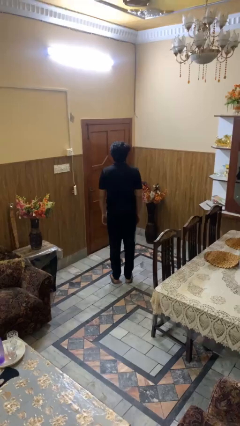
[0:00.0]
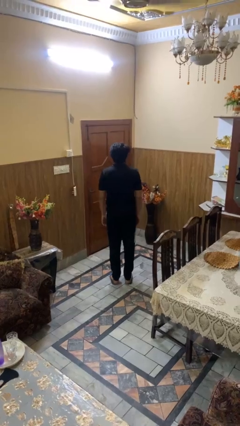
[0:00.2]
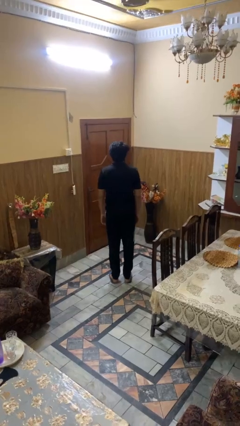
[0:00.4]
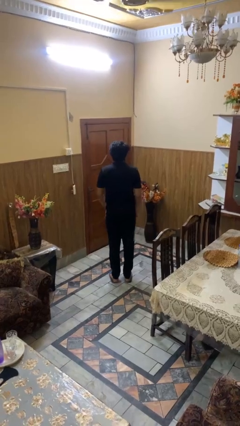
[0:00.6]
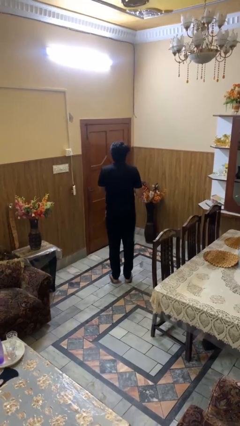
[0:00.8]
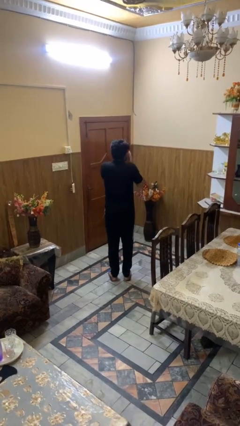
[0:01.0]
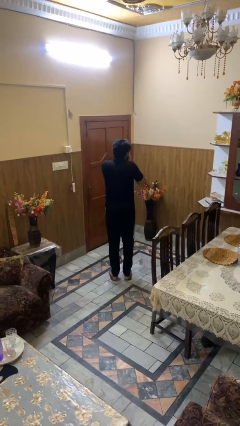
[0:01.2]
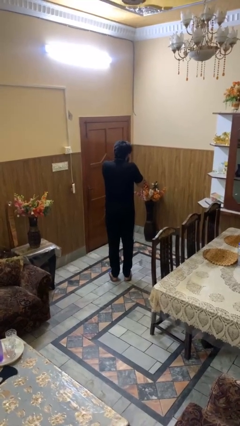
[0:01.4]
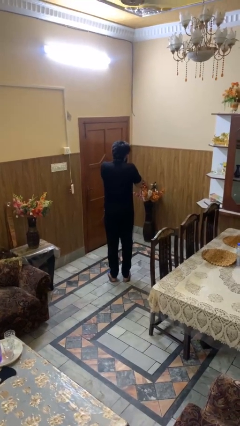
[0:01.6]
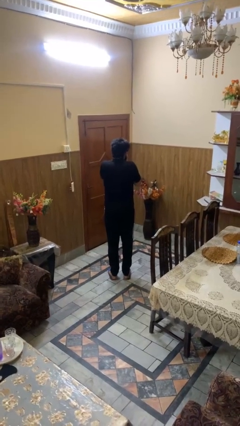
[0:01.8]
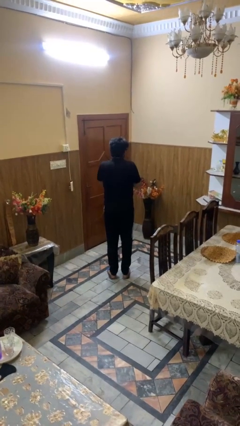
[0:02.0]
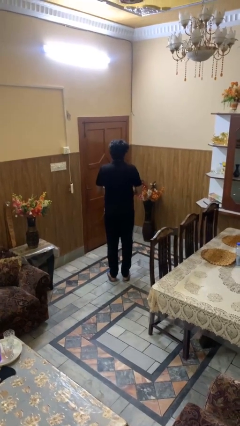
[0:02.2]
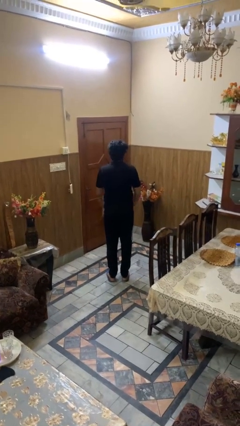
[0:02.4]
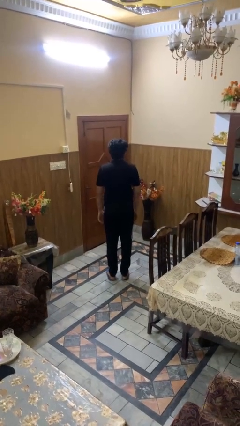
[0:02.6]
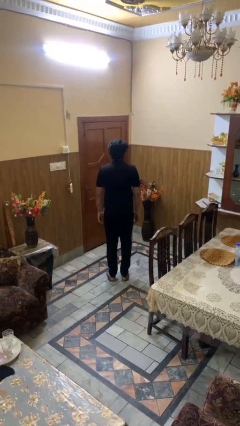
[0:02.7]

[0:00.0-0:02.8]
person sneezes into hand

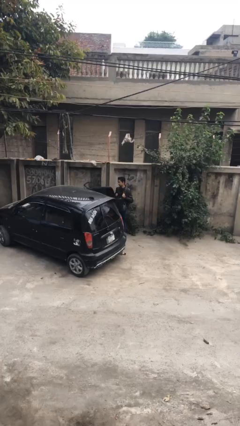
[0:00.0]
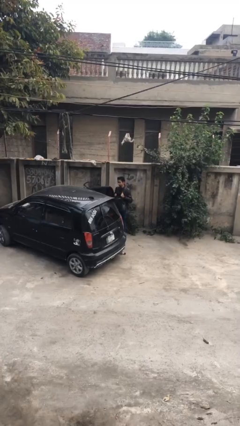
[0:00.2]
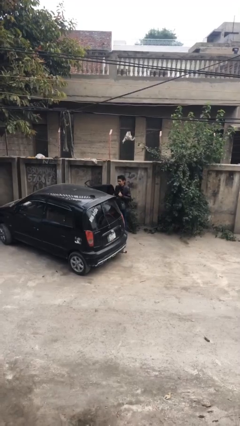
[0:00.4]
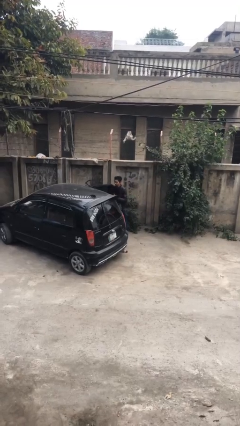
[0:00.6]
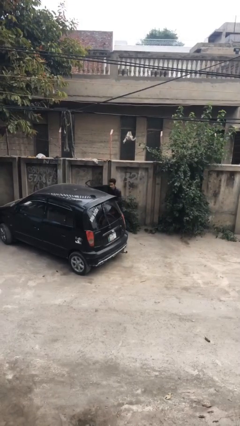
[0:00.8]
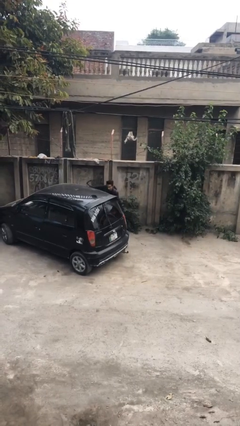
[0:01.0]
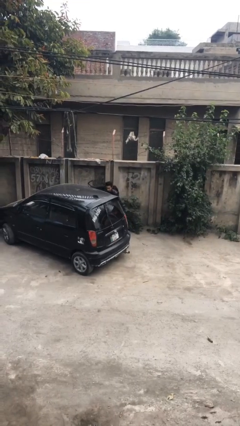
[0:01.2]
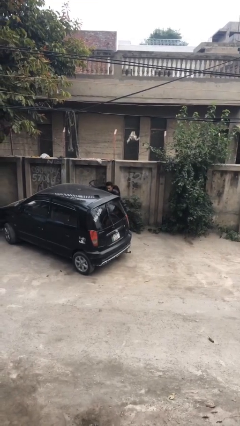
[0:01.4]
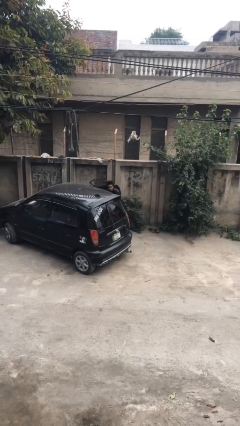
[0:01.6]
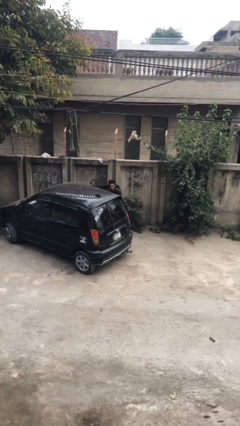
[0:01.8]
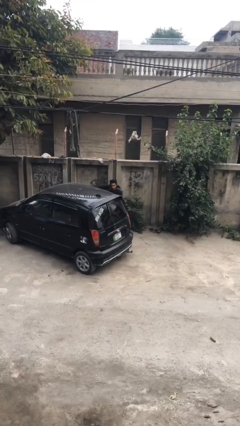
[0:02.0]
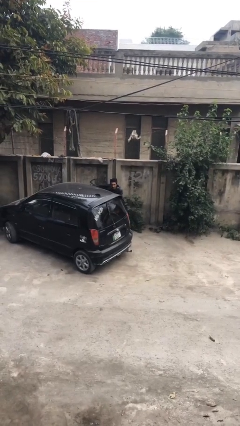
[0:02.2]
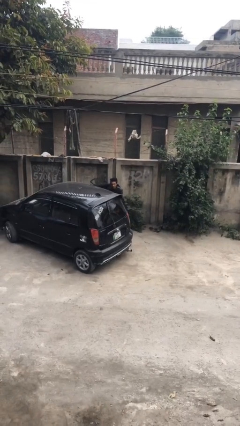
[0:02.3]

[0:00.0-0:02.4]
person loads car

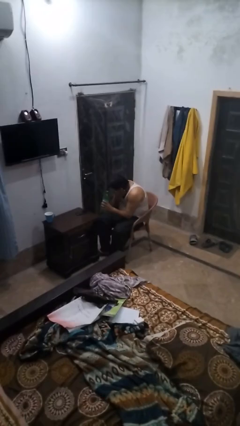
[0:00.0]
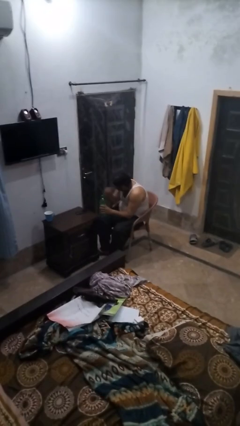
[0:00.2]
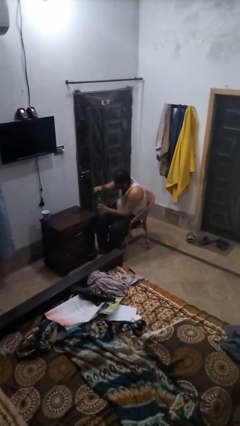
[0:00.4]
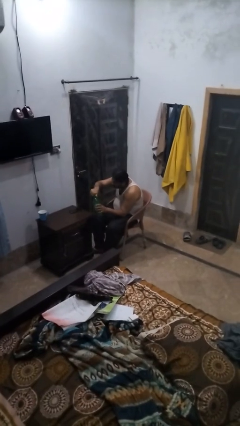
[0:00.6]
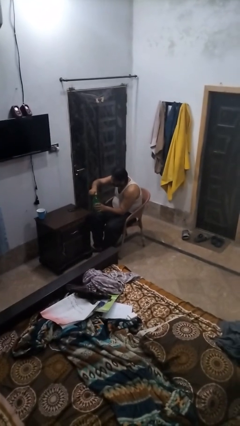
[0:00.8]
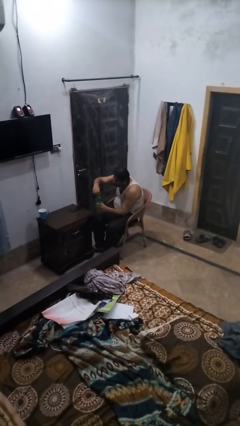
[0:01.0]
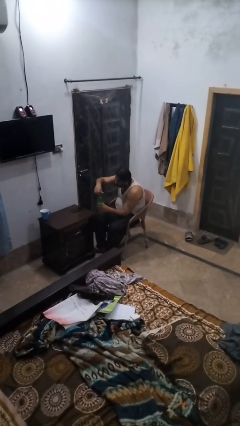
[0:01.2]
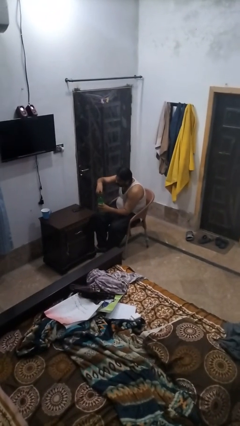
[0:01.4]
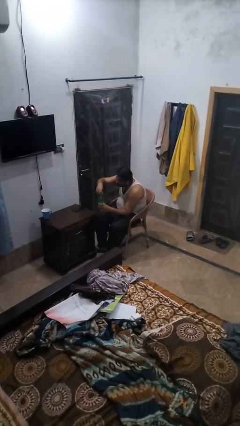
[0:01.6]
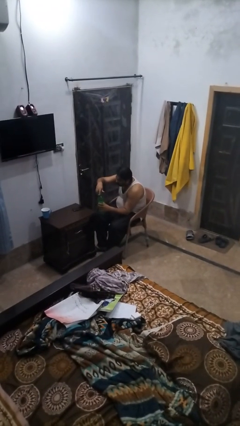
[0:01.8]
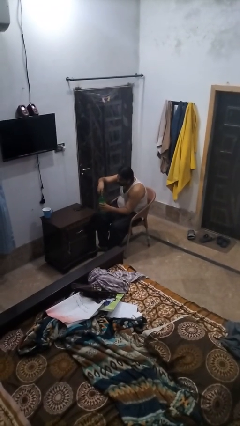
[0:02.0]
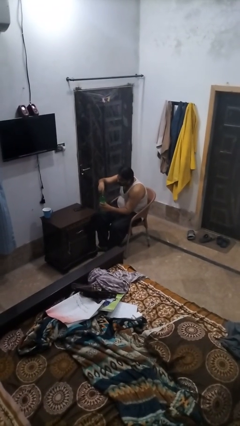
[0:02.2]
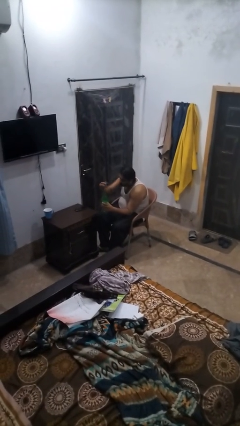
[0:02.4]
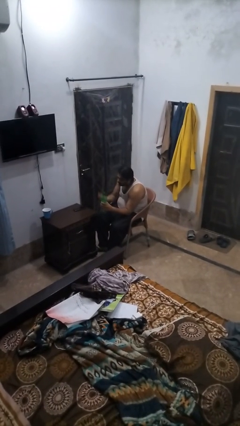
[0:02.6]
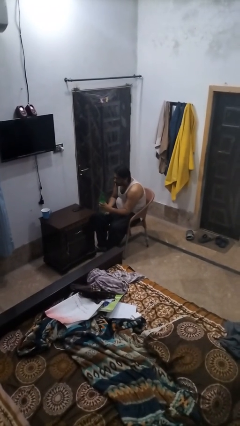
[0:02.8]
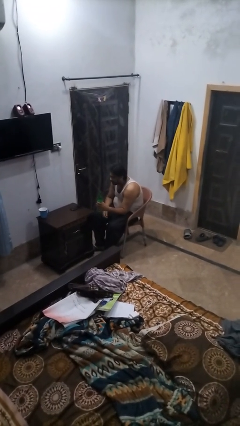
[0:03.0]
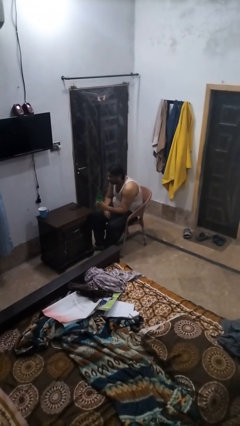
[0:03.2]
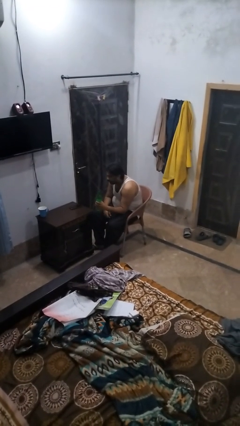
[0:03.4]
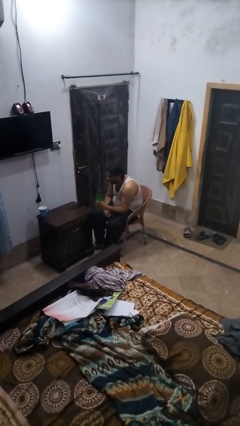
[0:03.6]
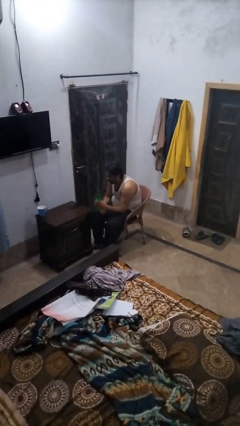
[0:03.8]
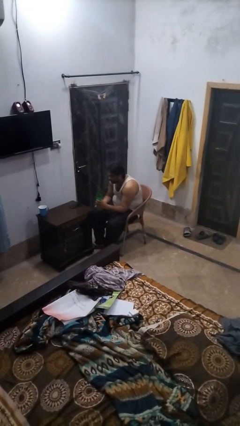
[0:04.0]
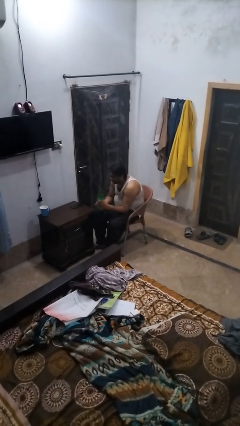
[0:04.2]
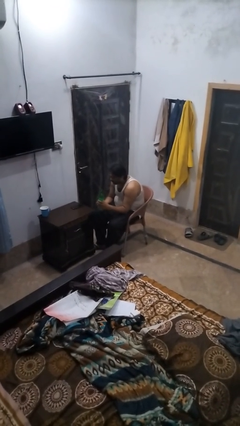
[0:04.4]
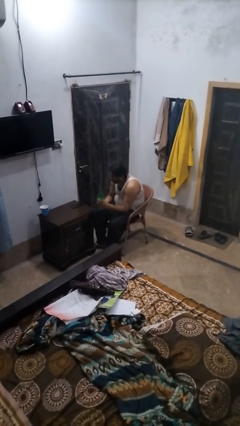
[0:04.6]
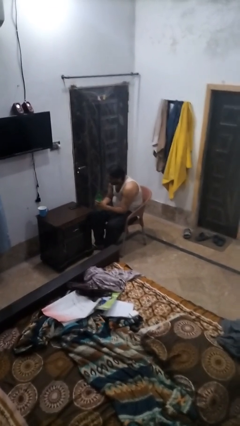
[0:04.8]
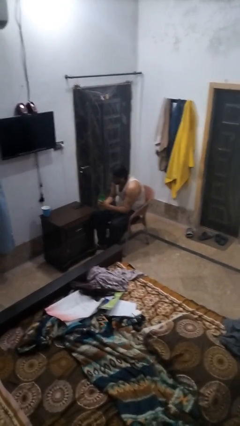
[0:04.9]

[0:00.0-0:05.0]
person unscrews lid from bottle

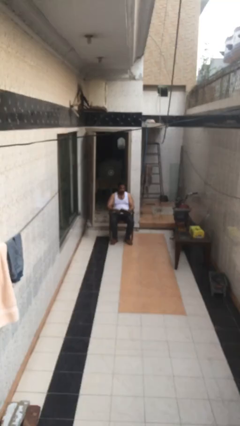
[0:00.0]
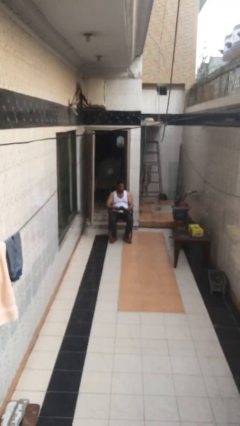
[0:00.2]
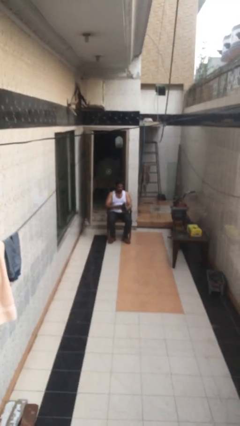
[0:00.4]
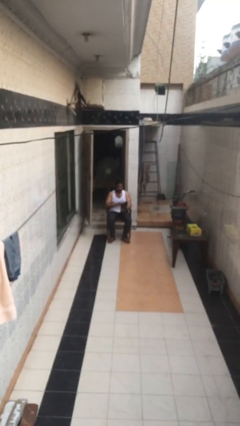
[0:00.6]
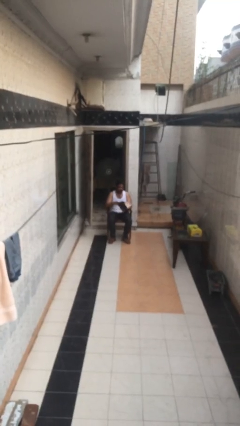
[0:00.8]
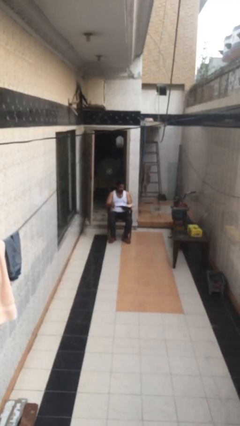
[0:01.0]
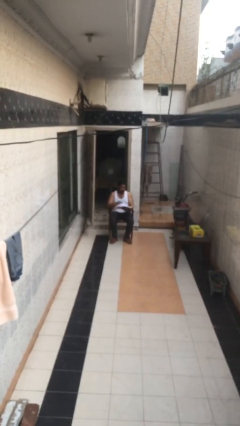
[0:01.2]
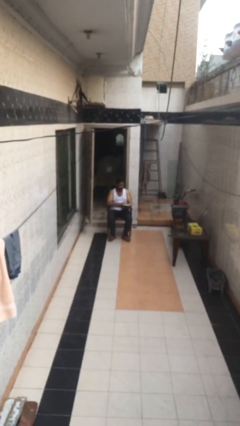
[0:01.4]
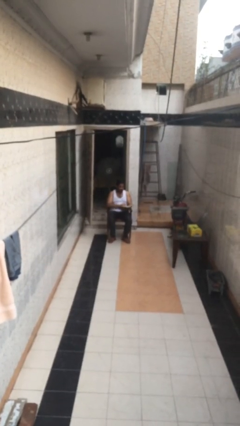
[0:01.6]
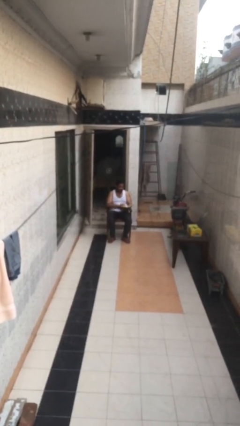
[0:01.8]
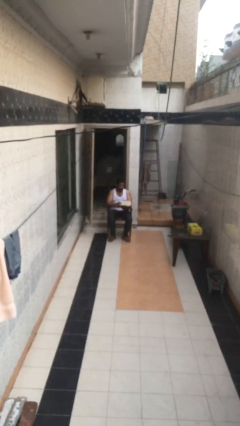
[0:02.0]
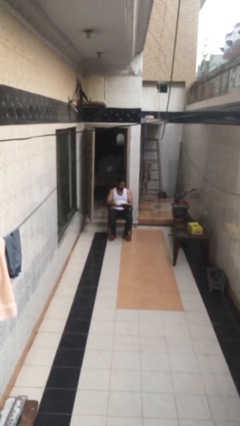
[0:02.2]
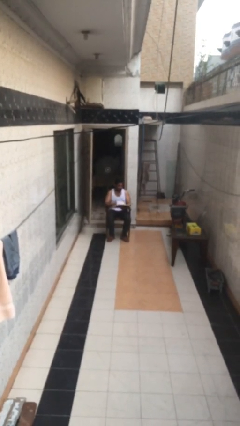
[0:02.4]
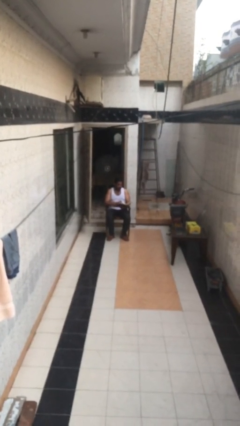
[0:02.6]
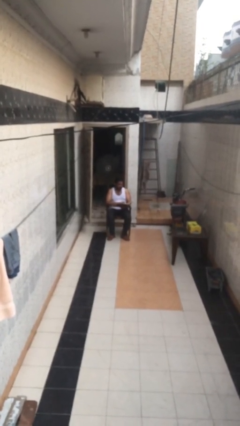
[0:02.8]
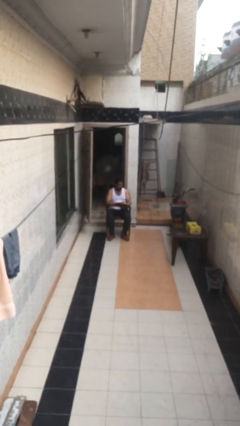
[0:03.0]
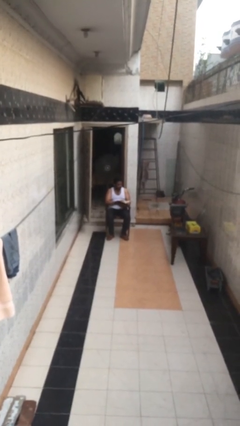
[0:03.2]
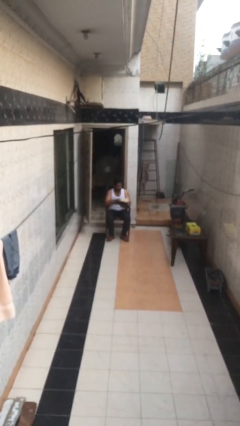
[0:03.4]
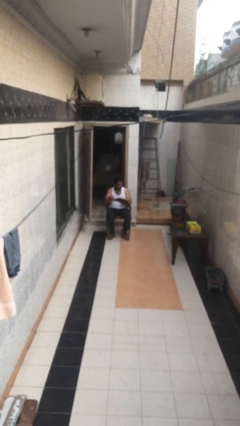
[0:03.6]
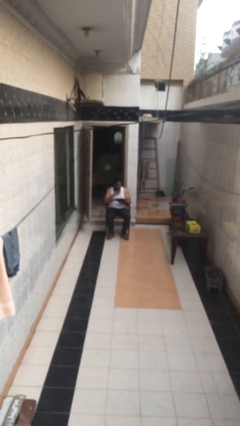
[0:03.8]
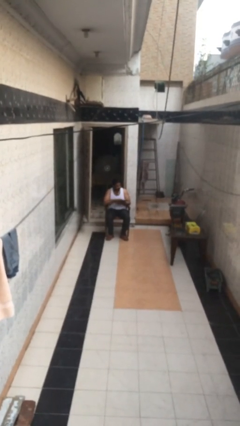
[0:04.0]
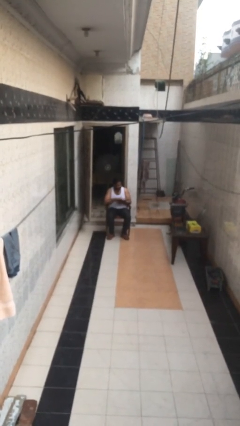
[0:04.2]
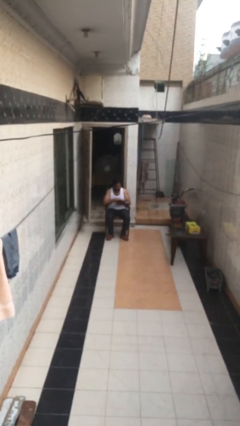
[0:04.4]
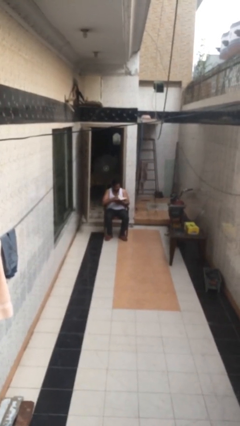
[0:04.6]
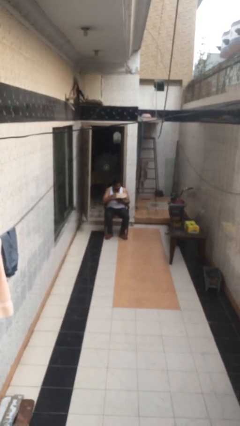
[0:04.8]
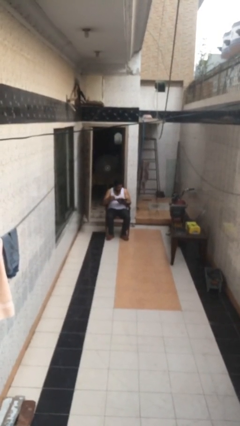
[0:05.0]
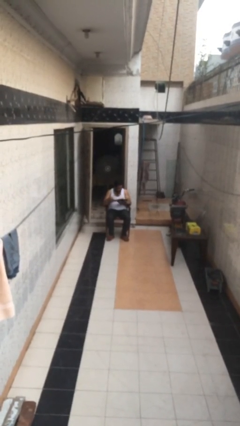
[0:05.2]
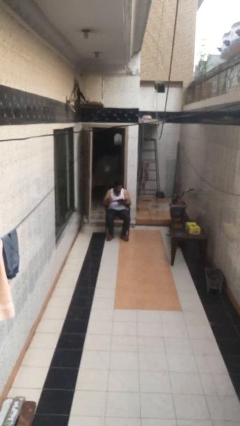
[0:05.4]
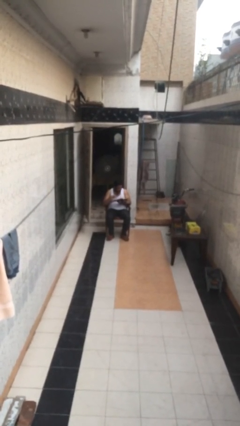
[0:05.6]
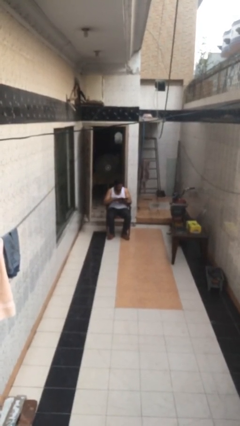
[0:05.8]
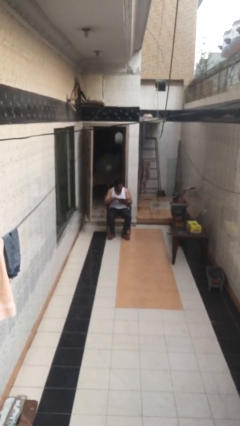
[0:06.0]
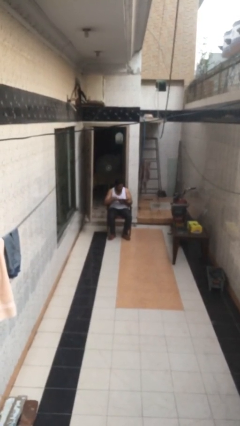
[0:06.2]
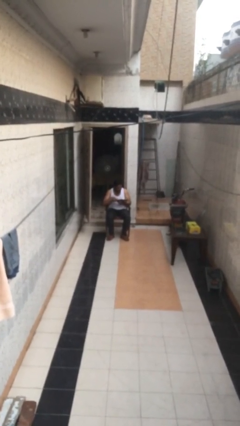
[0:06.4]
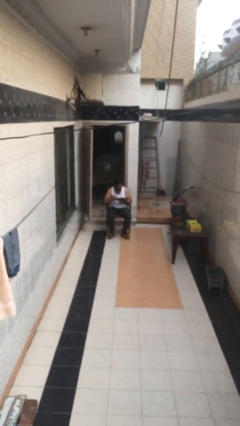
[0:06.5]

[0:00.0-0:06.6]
person reads document

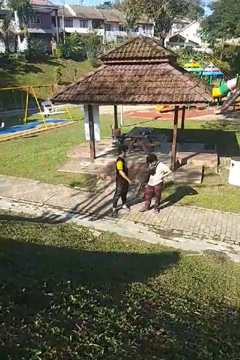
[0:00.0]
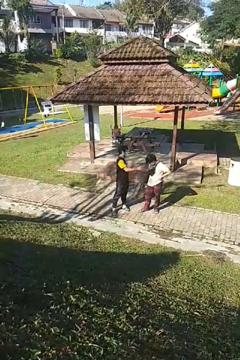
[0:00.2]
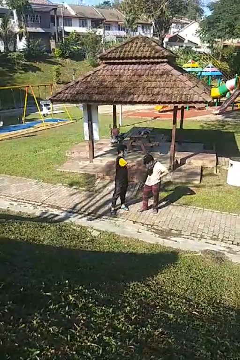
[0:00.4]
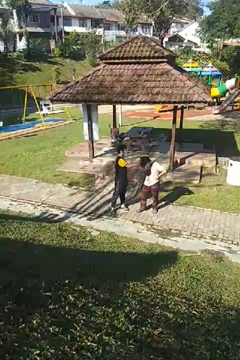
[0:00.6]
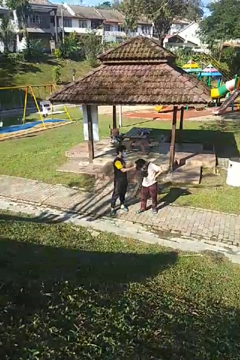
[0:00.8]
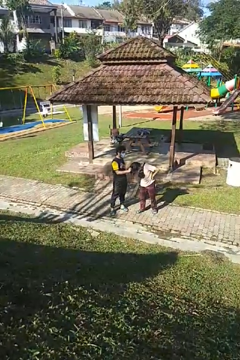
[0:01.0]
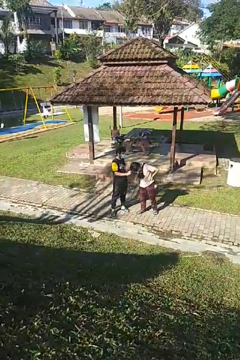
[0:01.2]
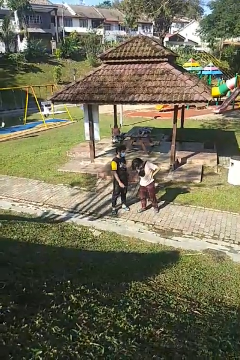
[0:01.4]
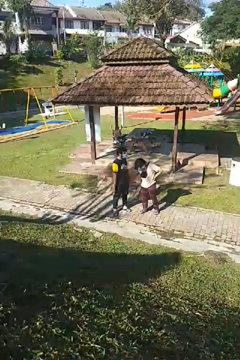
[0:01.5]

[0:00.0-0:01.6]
person grabs person by hair
